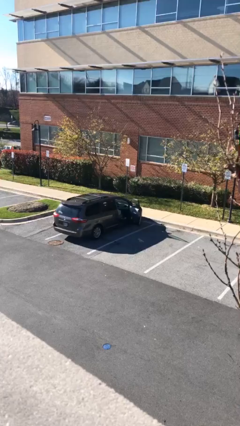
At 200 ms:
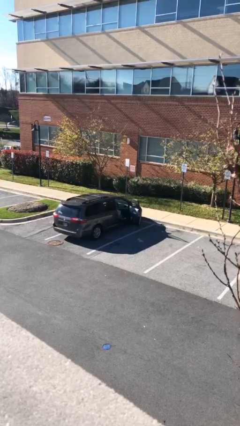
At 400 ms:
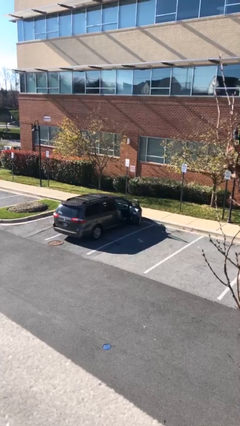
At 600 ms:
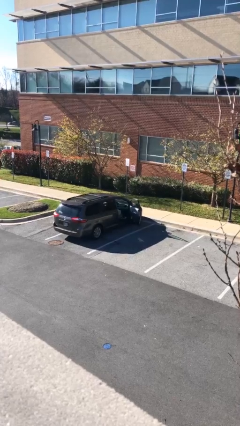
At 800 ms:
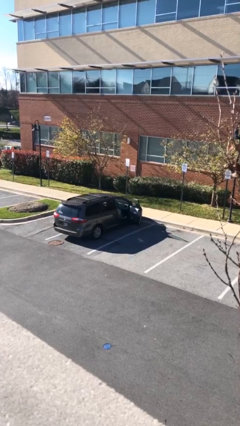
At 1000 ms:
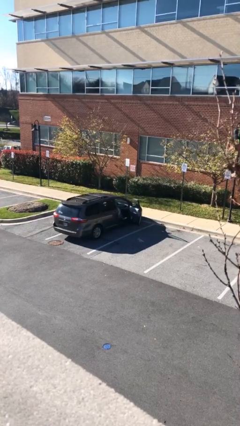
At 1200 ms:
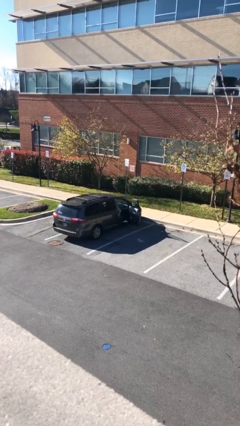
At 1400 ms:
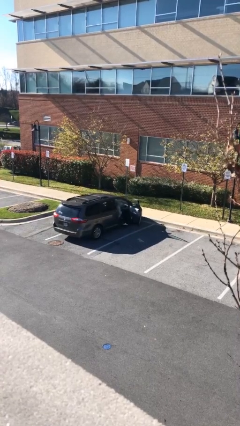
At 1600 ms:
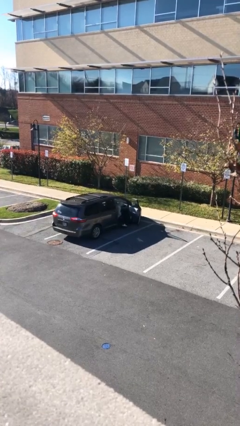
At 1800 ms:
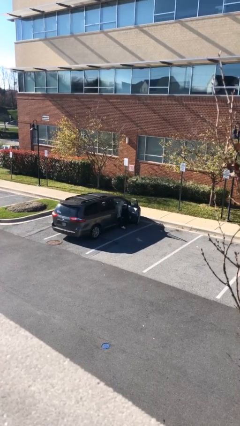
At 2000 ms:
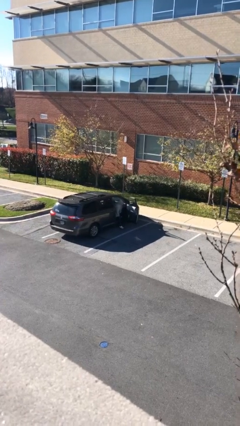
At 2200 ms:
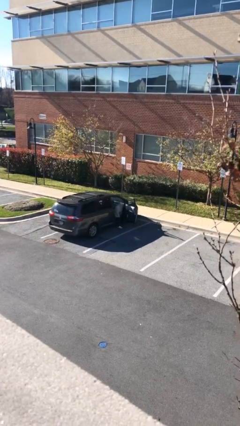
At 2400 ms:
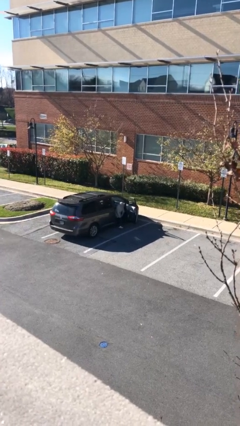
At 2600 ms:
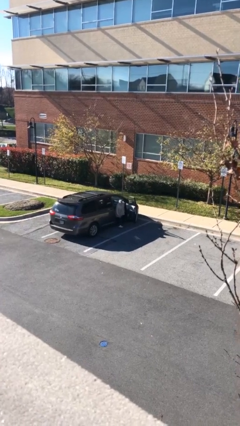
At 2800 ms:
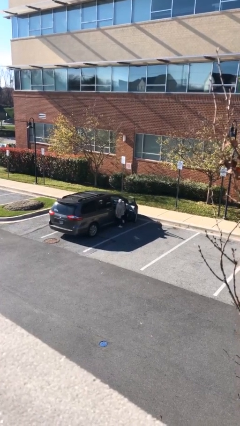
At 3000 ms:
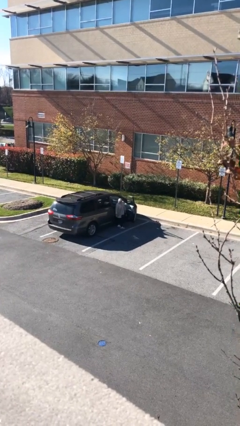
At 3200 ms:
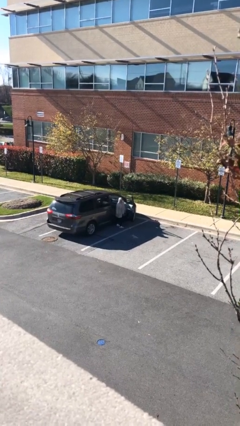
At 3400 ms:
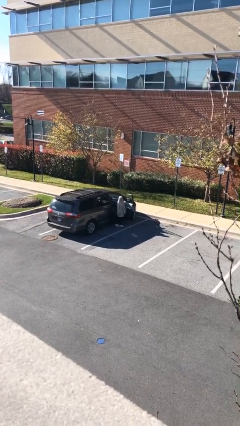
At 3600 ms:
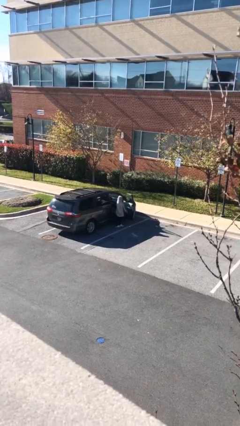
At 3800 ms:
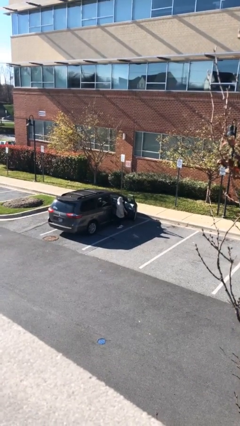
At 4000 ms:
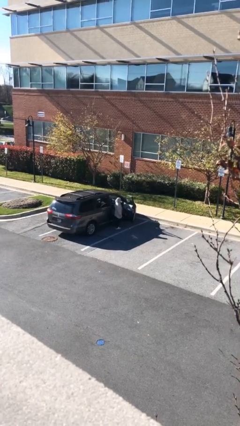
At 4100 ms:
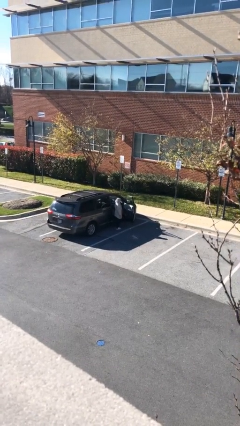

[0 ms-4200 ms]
person exits car

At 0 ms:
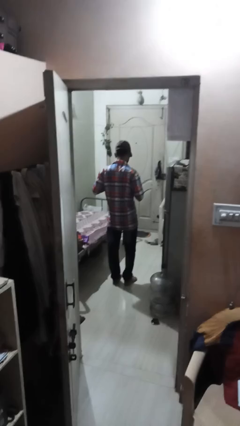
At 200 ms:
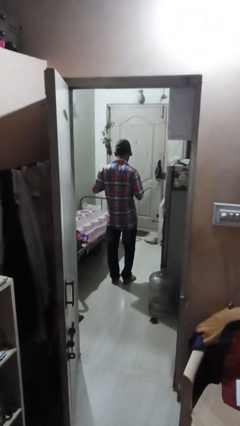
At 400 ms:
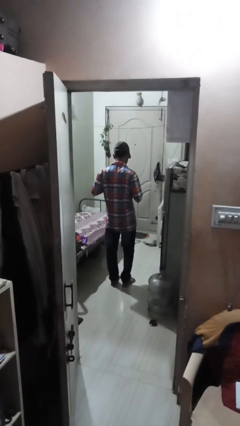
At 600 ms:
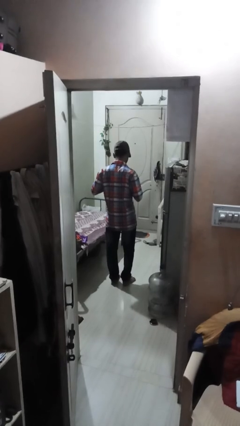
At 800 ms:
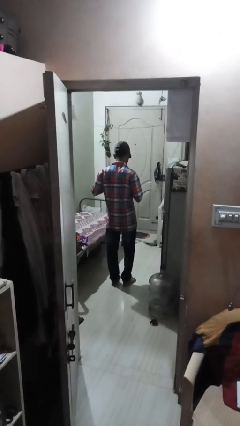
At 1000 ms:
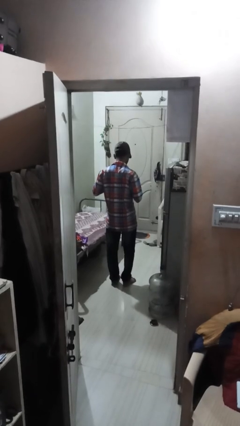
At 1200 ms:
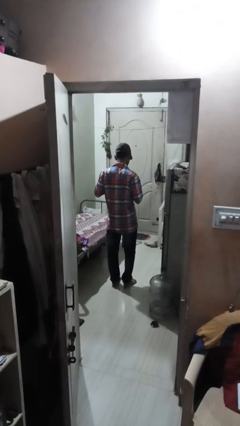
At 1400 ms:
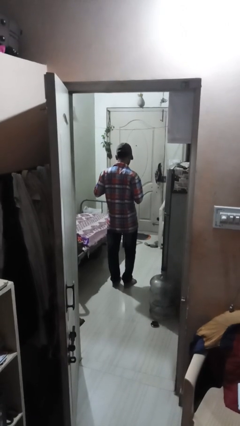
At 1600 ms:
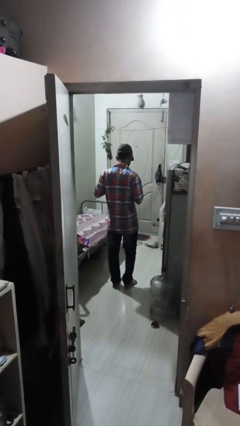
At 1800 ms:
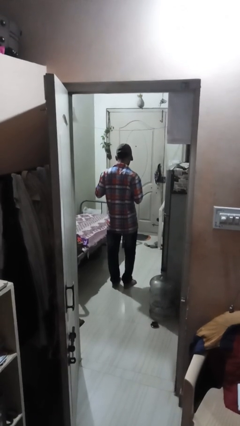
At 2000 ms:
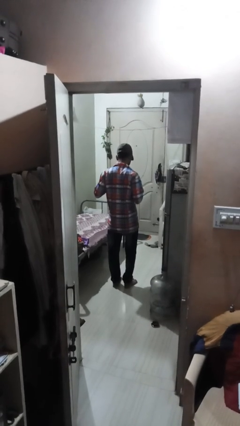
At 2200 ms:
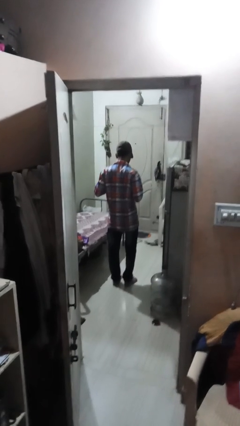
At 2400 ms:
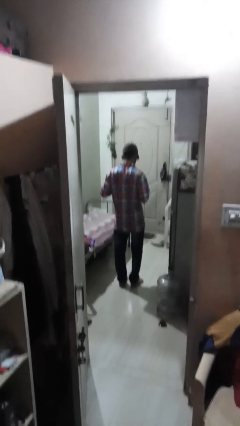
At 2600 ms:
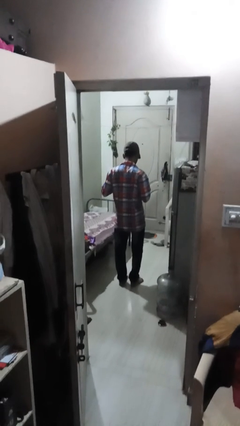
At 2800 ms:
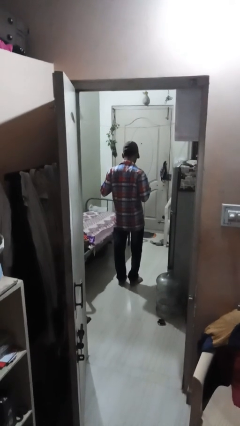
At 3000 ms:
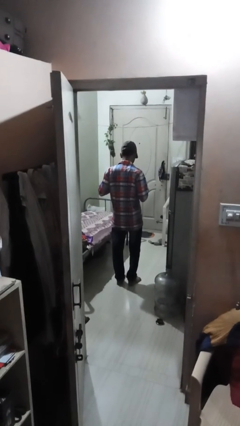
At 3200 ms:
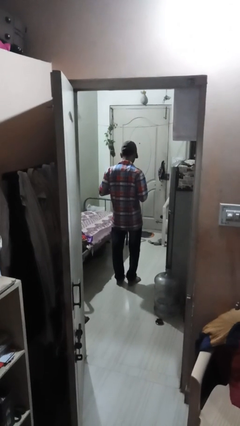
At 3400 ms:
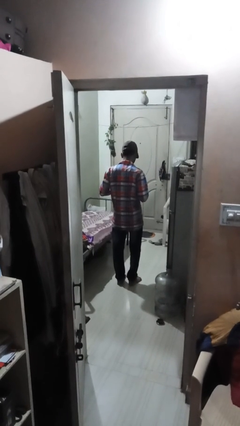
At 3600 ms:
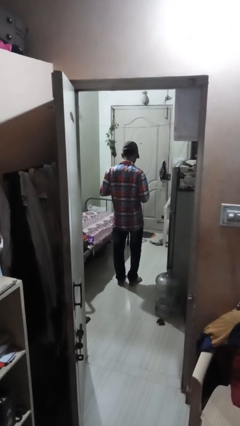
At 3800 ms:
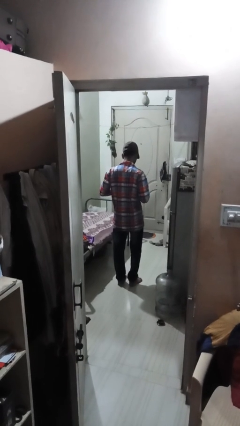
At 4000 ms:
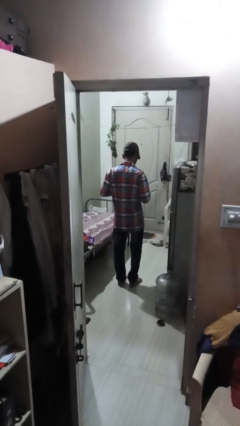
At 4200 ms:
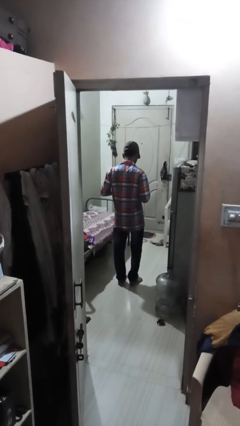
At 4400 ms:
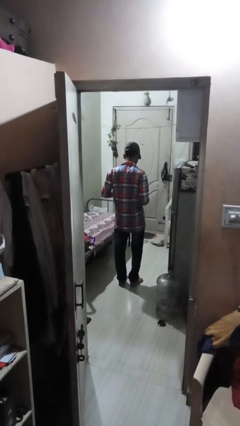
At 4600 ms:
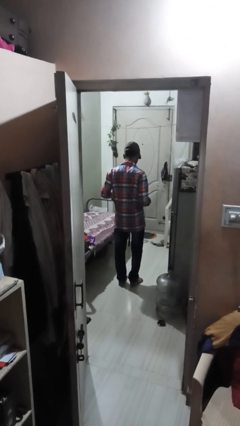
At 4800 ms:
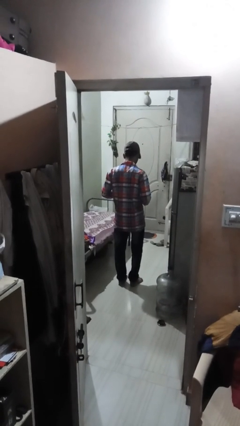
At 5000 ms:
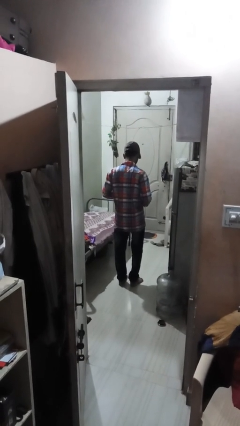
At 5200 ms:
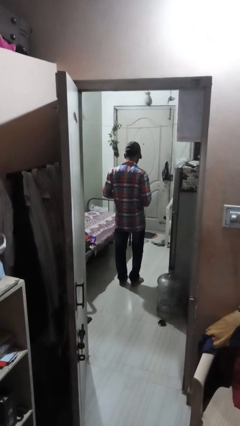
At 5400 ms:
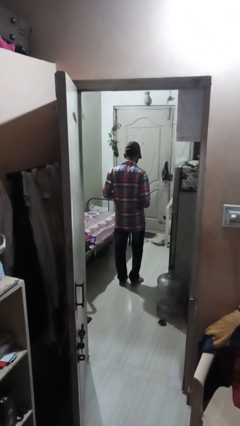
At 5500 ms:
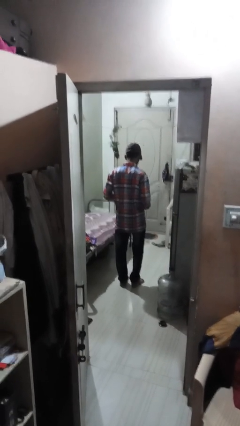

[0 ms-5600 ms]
person unbuttons shirt

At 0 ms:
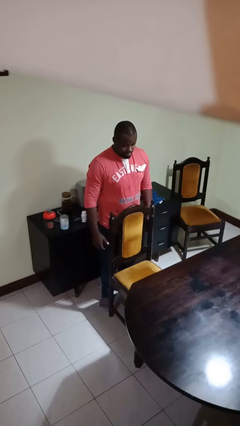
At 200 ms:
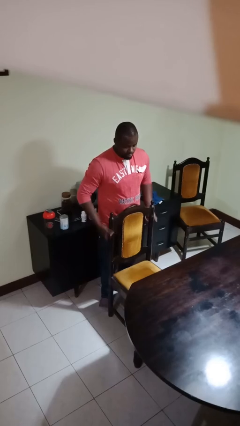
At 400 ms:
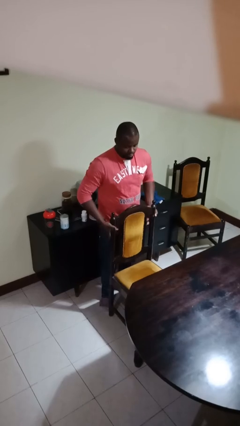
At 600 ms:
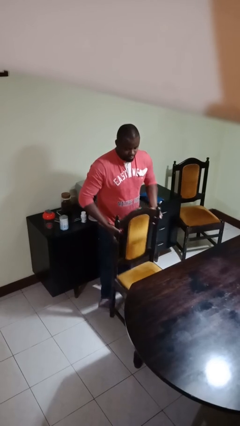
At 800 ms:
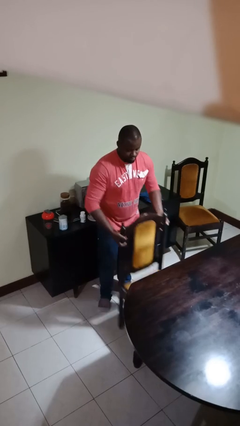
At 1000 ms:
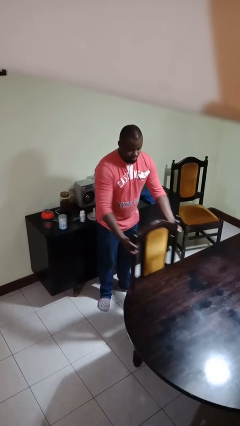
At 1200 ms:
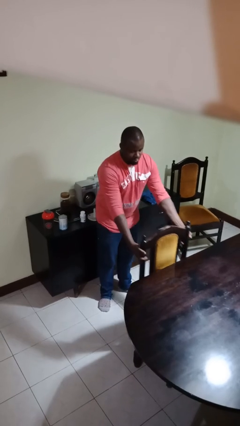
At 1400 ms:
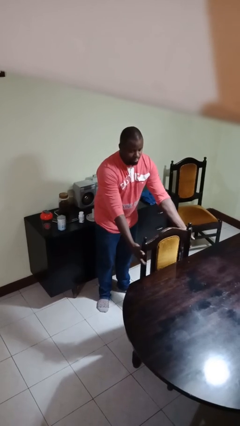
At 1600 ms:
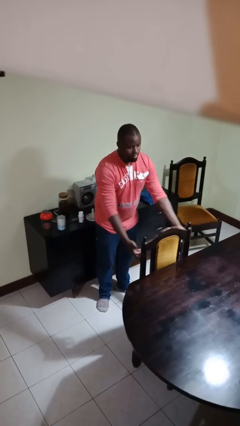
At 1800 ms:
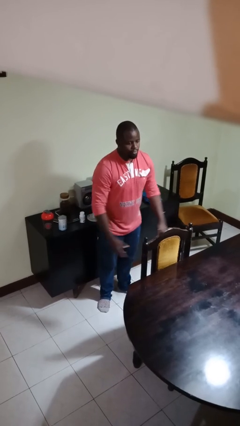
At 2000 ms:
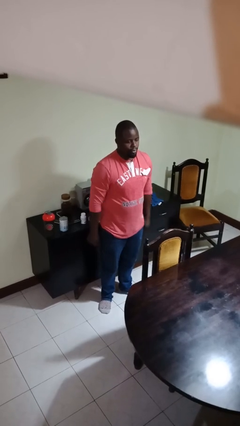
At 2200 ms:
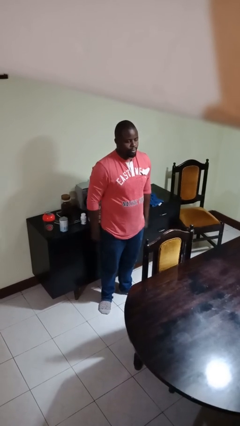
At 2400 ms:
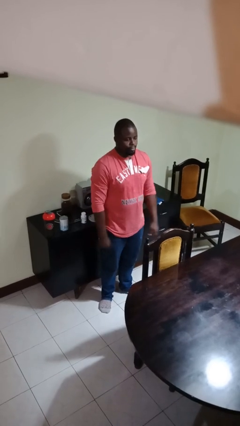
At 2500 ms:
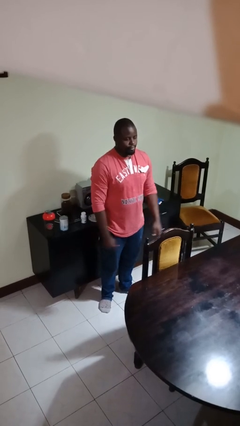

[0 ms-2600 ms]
person pushes in chair

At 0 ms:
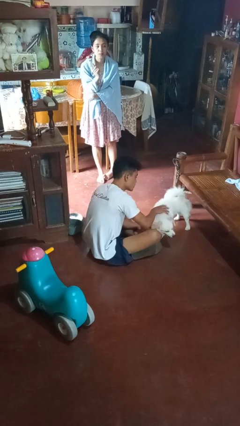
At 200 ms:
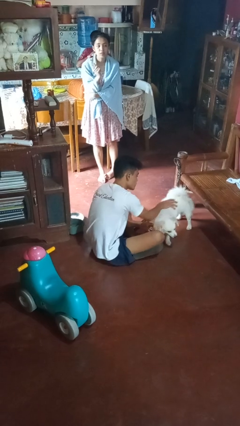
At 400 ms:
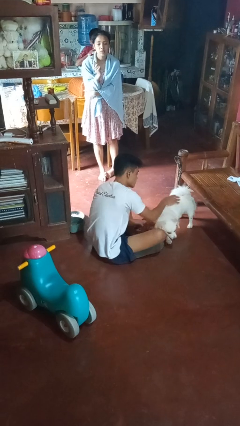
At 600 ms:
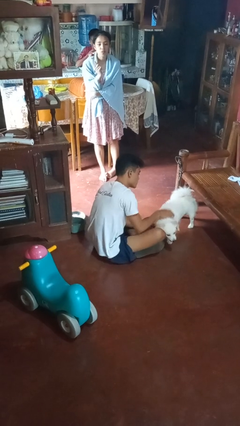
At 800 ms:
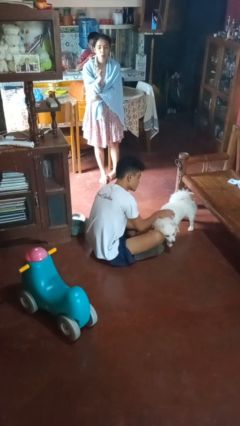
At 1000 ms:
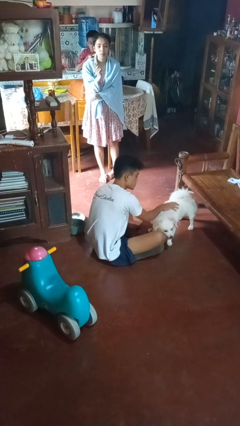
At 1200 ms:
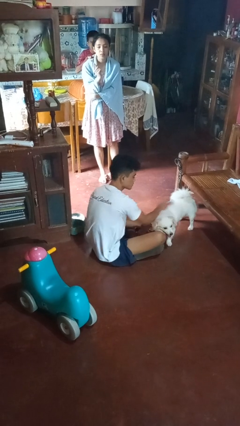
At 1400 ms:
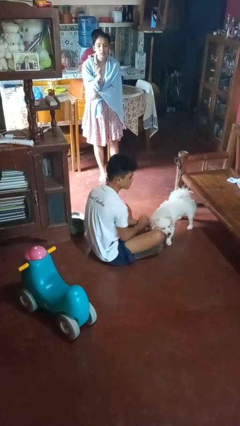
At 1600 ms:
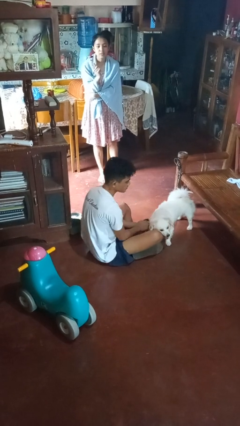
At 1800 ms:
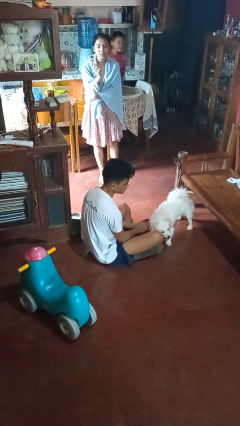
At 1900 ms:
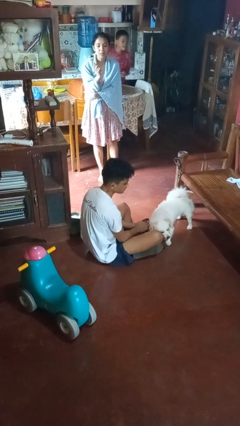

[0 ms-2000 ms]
person pets dog

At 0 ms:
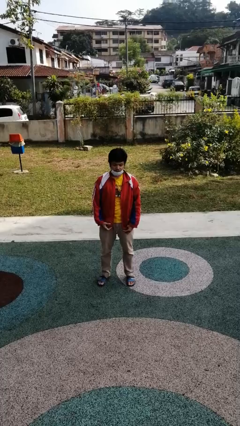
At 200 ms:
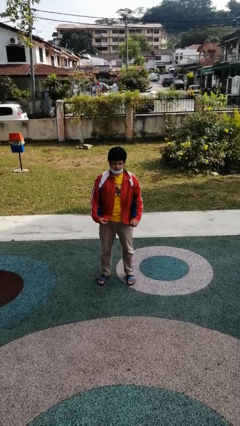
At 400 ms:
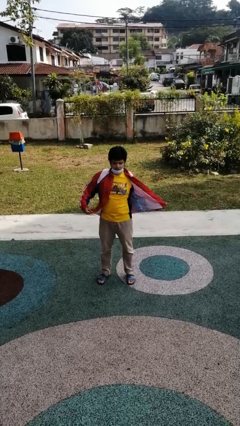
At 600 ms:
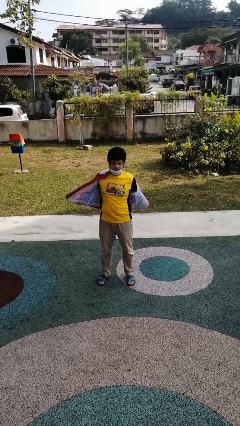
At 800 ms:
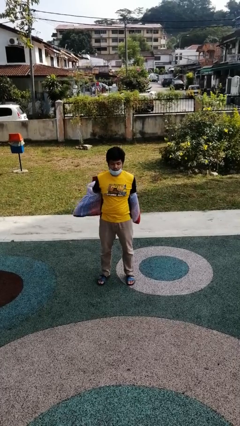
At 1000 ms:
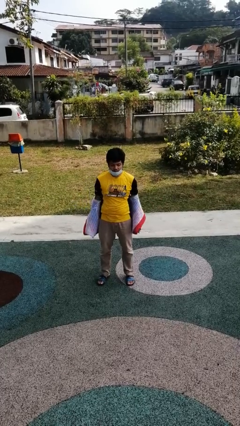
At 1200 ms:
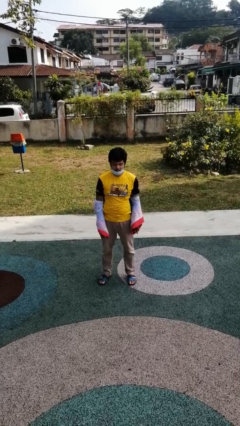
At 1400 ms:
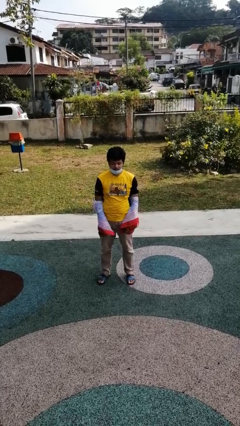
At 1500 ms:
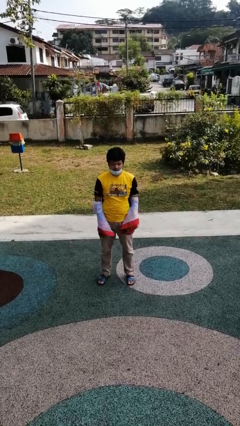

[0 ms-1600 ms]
person takes off jacket

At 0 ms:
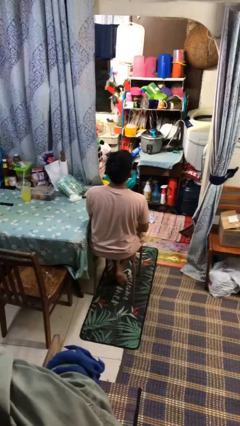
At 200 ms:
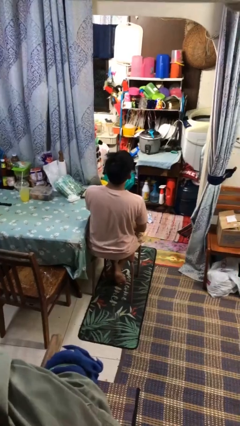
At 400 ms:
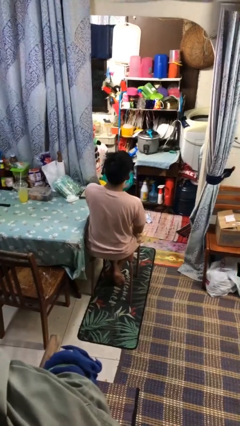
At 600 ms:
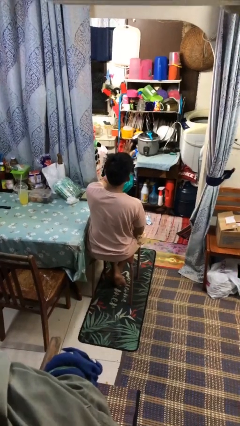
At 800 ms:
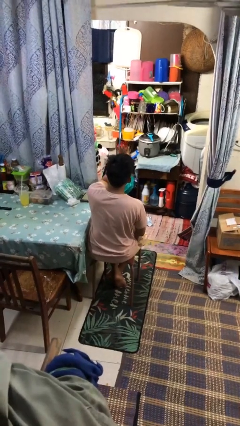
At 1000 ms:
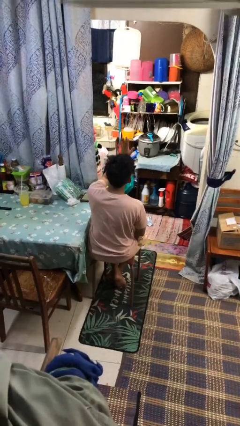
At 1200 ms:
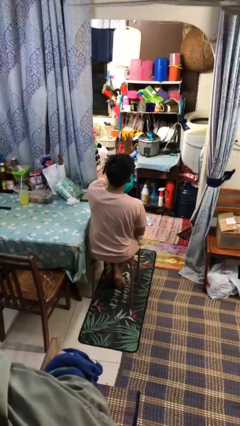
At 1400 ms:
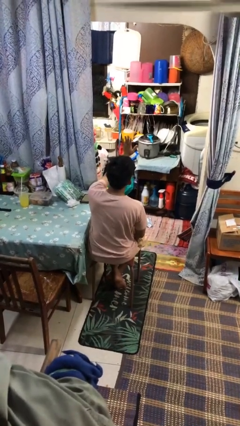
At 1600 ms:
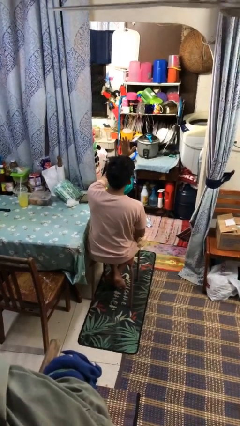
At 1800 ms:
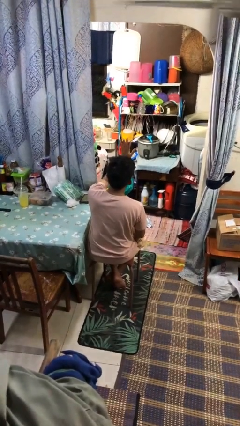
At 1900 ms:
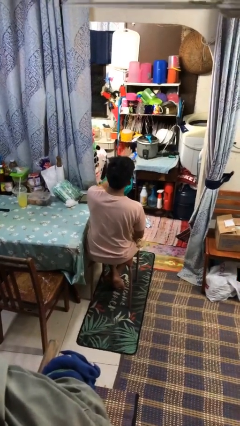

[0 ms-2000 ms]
person gestures stop
